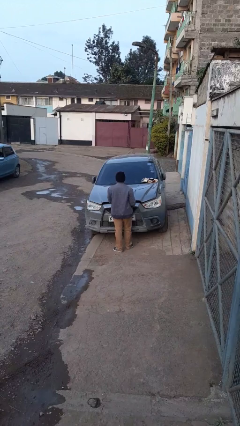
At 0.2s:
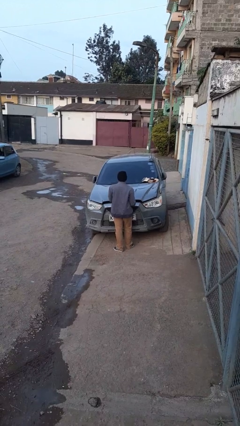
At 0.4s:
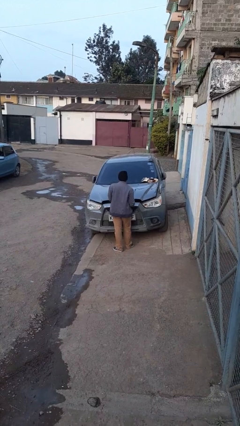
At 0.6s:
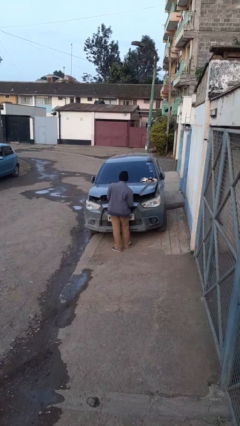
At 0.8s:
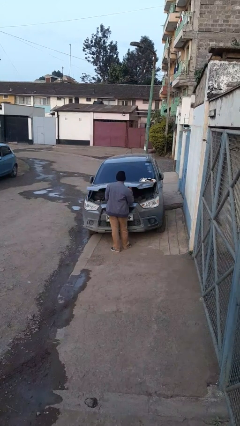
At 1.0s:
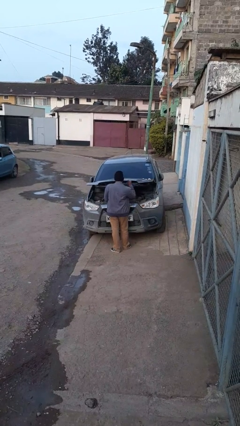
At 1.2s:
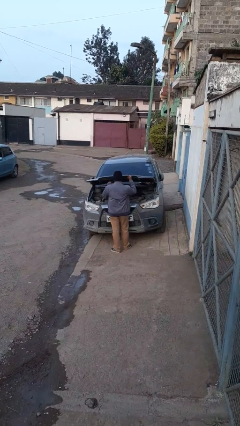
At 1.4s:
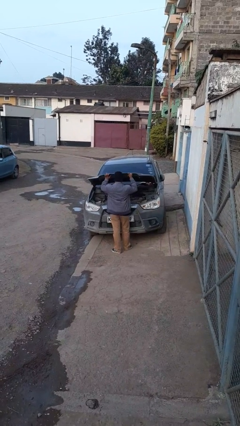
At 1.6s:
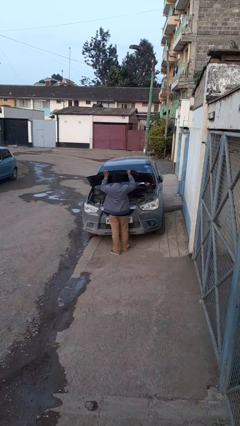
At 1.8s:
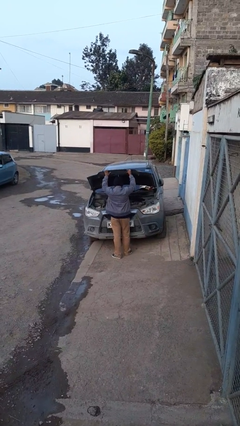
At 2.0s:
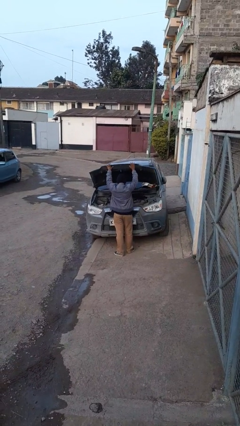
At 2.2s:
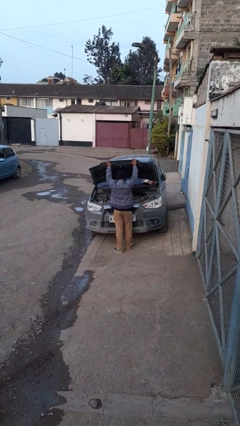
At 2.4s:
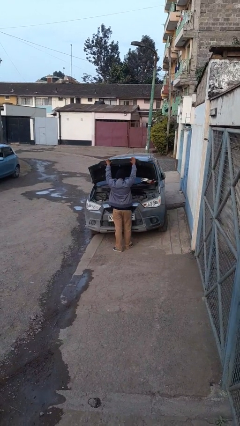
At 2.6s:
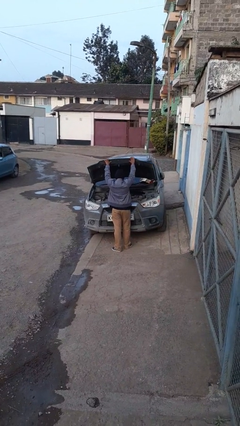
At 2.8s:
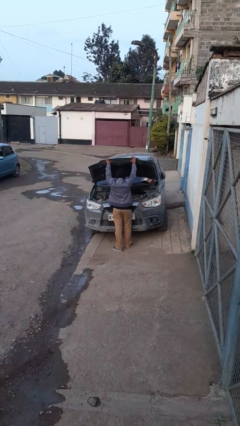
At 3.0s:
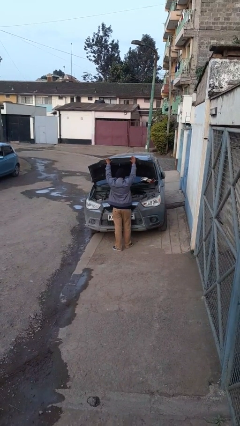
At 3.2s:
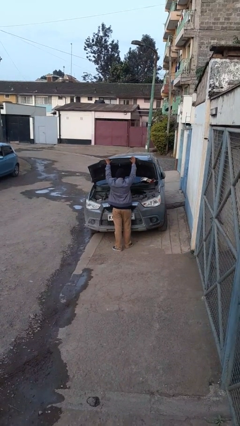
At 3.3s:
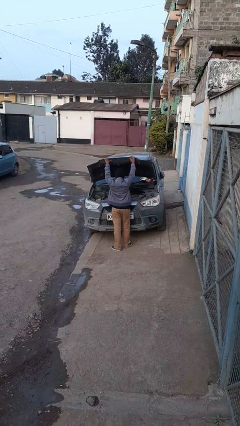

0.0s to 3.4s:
person opens car hood

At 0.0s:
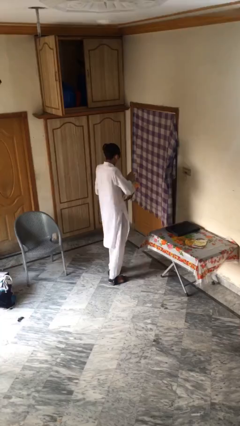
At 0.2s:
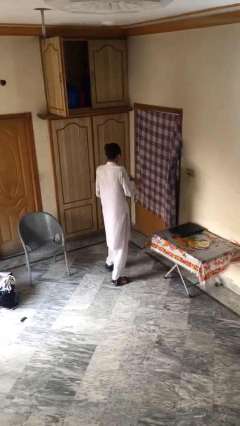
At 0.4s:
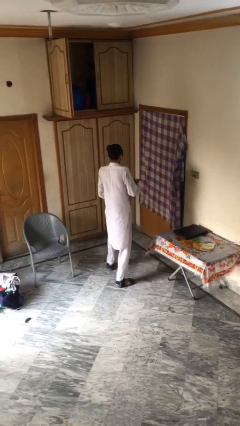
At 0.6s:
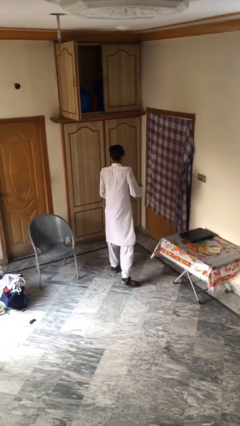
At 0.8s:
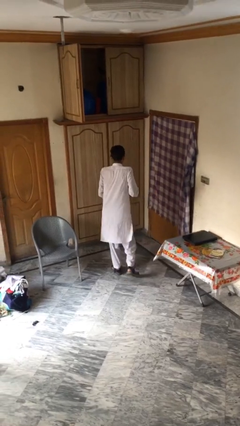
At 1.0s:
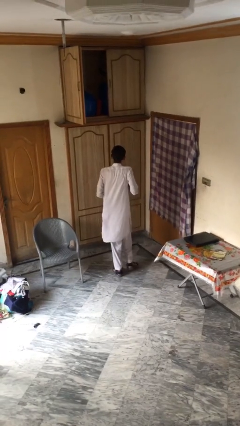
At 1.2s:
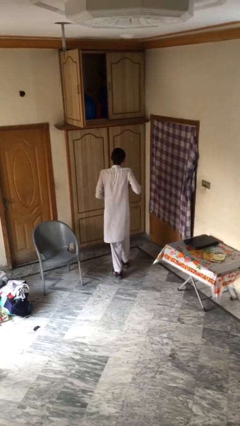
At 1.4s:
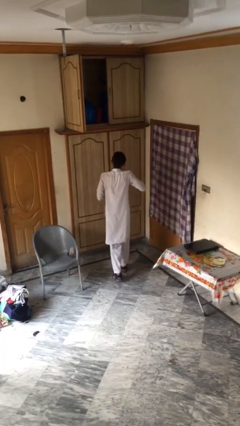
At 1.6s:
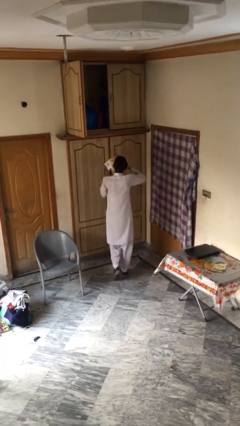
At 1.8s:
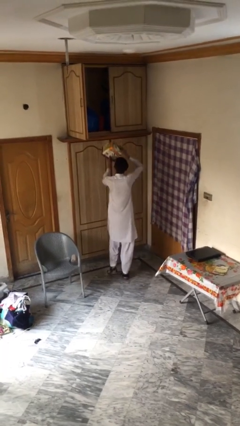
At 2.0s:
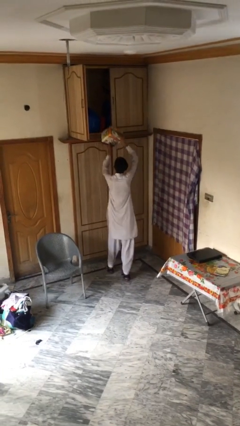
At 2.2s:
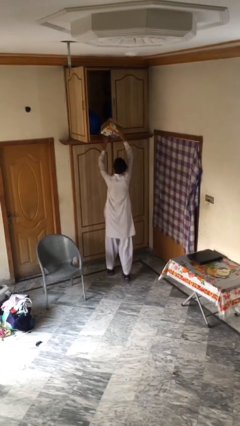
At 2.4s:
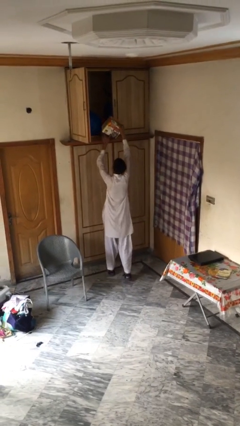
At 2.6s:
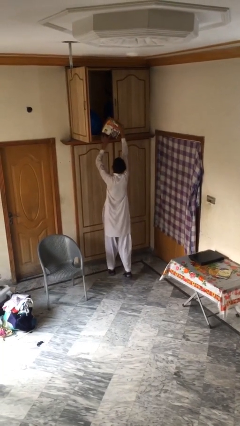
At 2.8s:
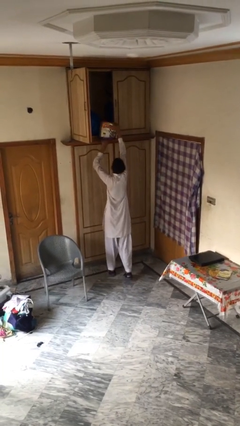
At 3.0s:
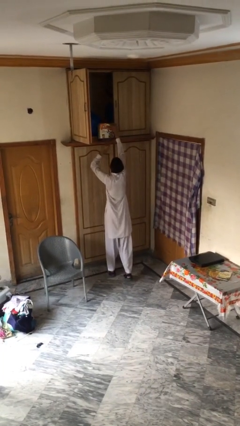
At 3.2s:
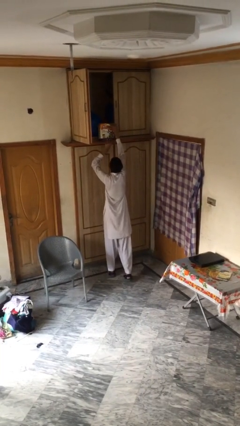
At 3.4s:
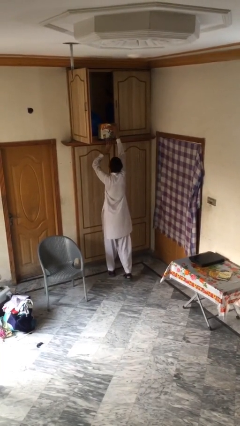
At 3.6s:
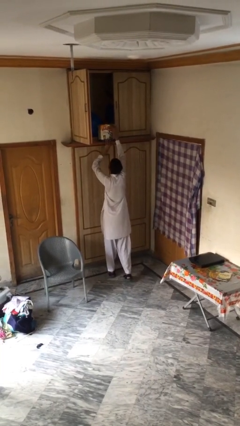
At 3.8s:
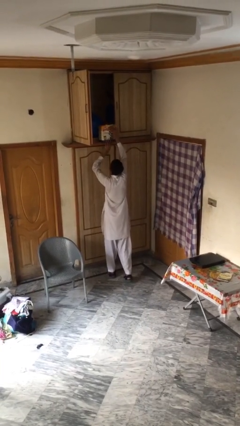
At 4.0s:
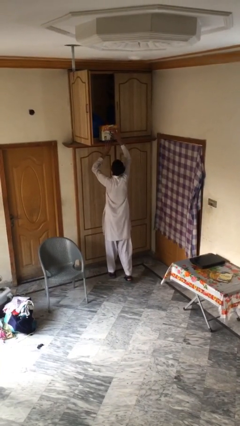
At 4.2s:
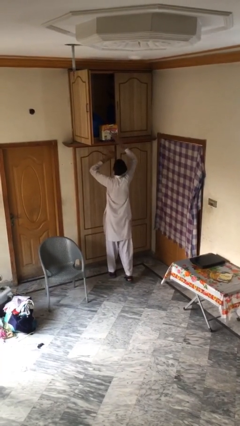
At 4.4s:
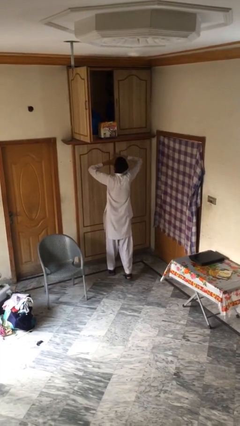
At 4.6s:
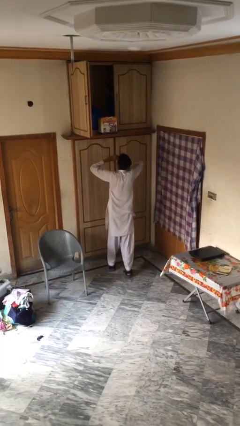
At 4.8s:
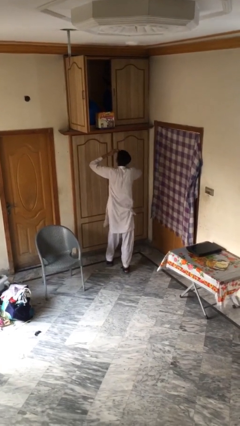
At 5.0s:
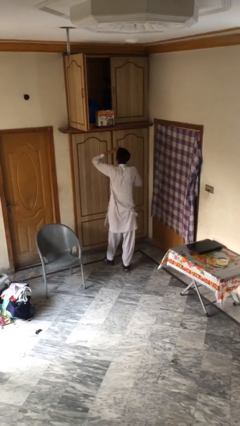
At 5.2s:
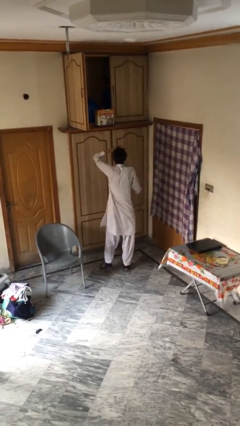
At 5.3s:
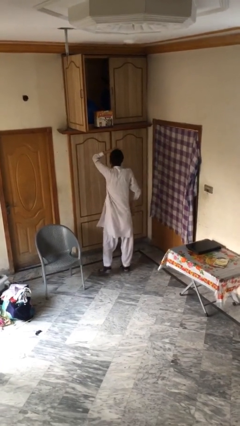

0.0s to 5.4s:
person puts down object on shelf

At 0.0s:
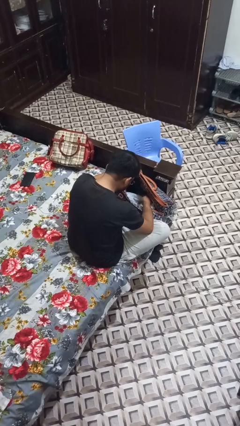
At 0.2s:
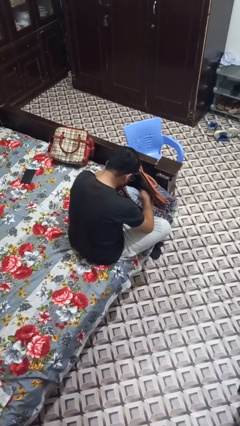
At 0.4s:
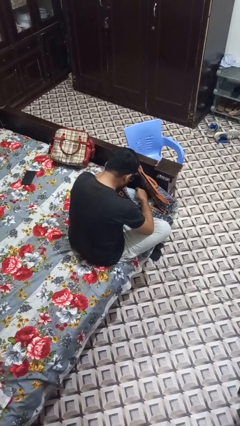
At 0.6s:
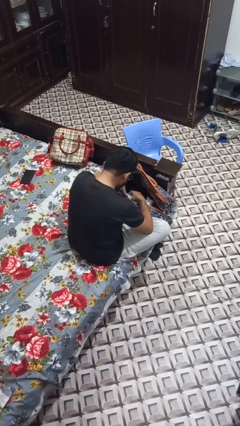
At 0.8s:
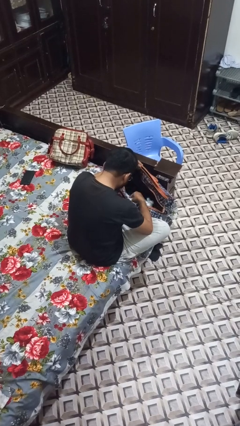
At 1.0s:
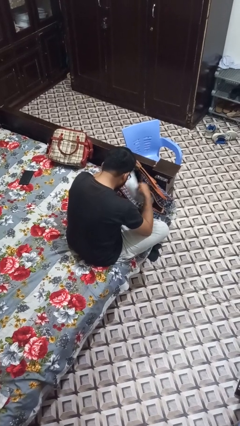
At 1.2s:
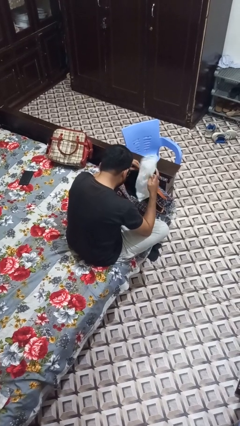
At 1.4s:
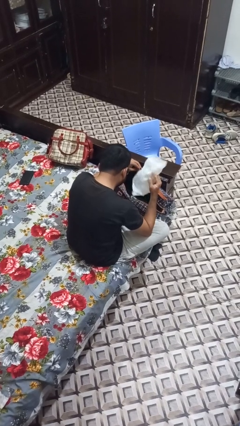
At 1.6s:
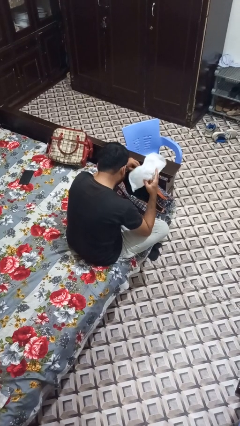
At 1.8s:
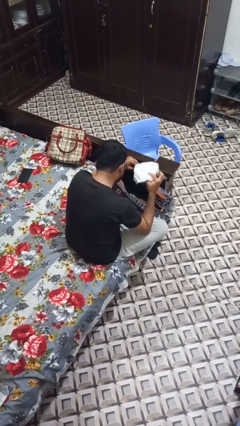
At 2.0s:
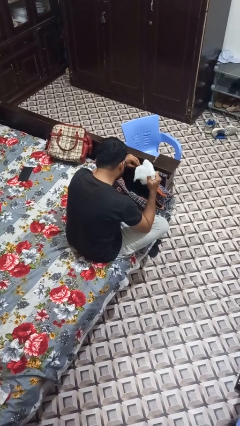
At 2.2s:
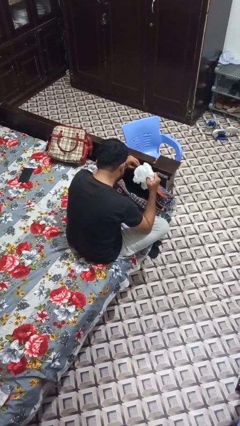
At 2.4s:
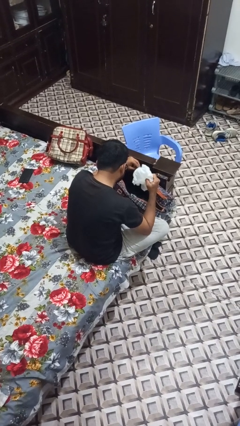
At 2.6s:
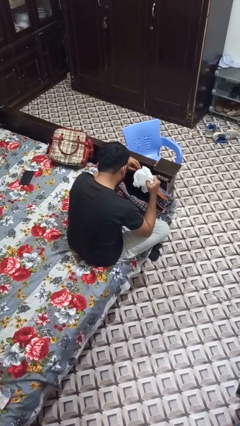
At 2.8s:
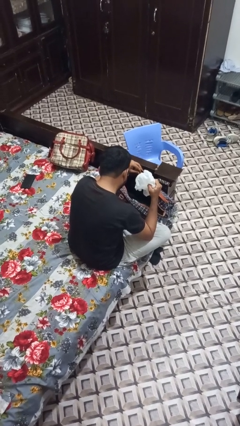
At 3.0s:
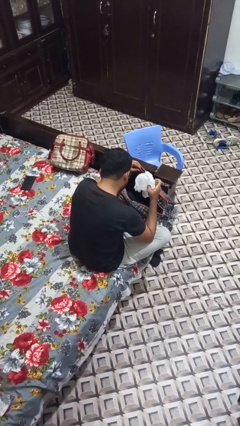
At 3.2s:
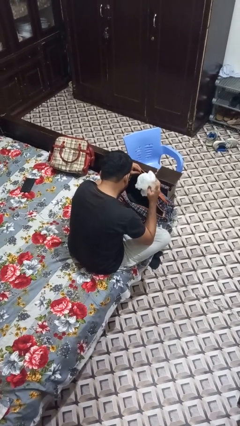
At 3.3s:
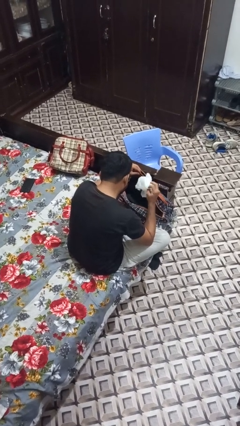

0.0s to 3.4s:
person takes object from backpack

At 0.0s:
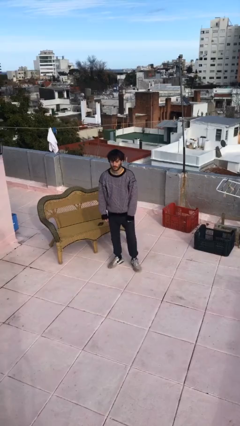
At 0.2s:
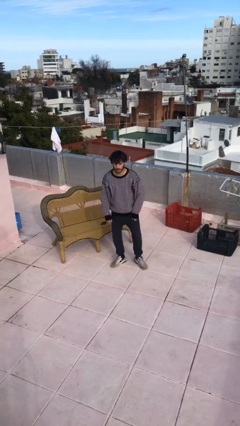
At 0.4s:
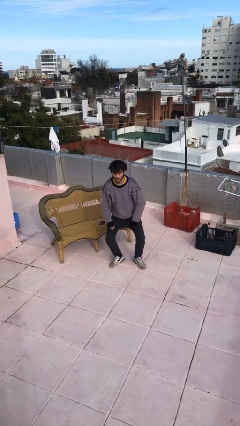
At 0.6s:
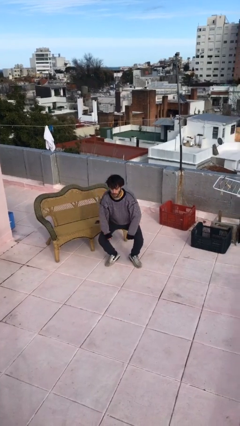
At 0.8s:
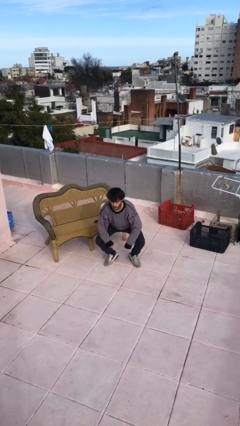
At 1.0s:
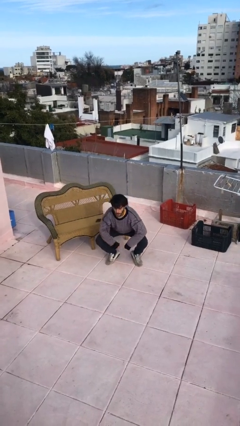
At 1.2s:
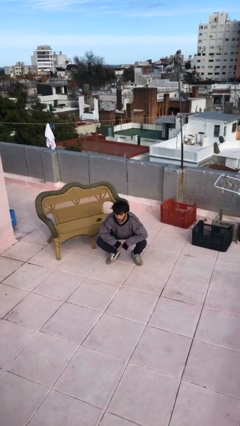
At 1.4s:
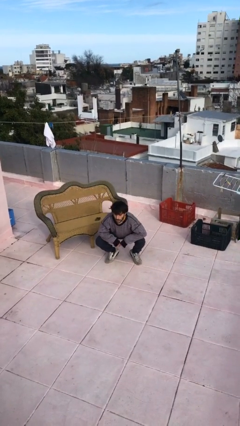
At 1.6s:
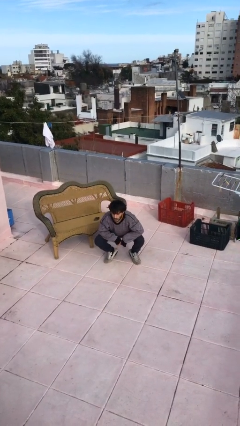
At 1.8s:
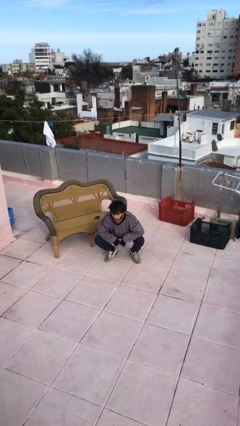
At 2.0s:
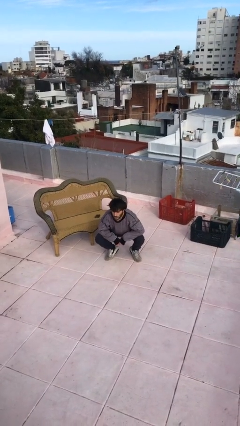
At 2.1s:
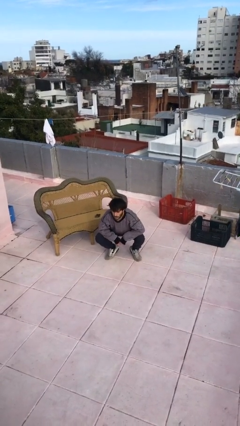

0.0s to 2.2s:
person squats

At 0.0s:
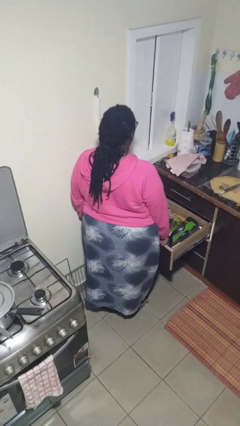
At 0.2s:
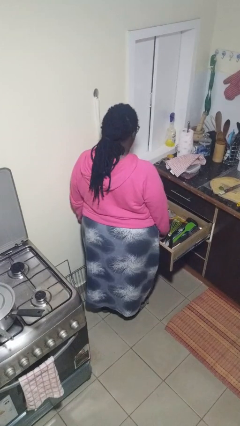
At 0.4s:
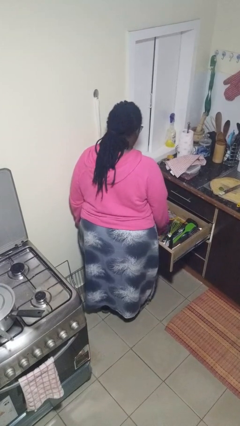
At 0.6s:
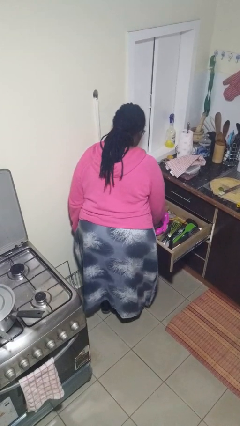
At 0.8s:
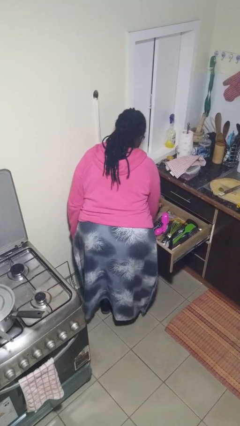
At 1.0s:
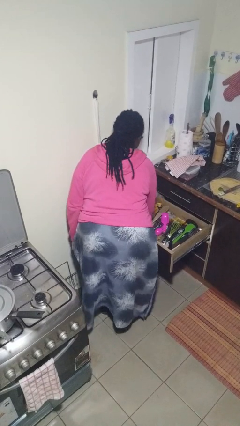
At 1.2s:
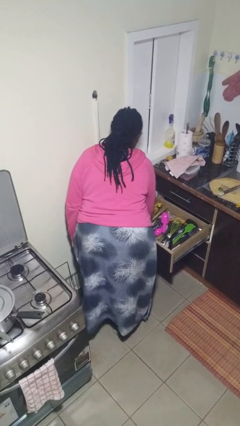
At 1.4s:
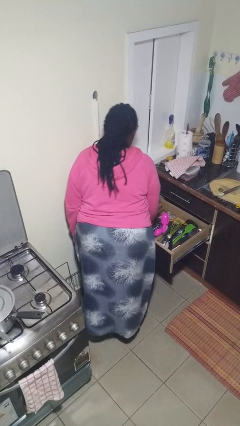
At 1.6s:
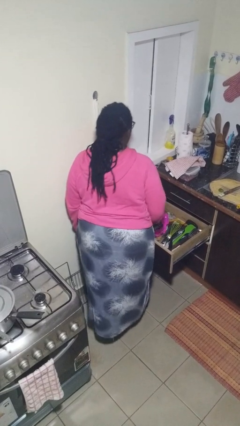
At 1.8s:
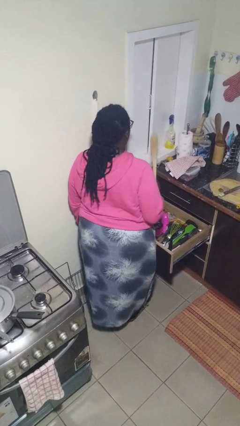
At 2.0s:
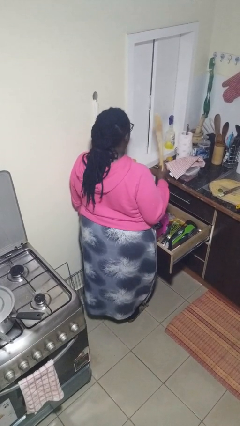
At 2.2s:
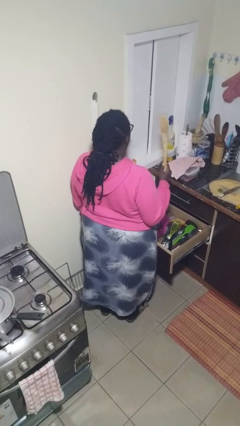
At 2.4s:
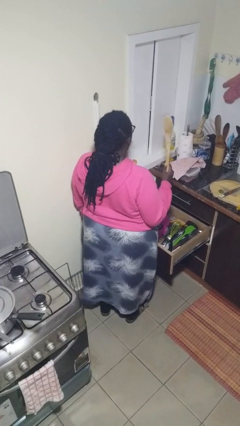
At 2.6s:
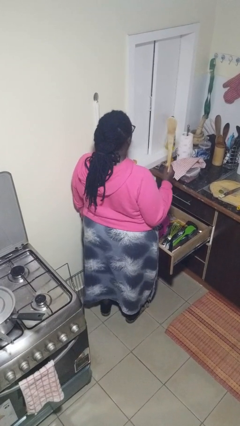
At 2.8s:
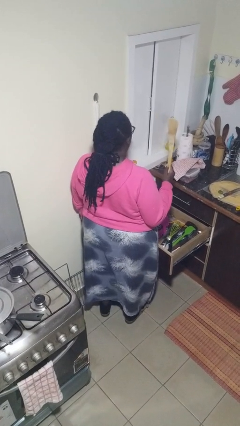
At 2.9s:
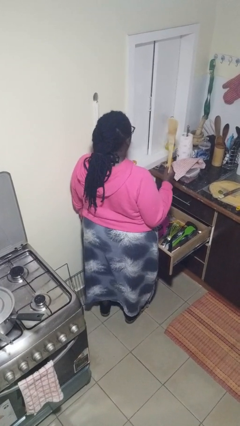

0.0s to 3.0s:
person takes object from kitchen drawer

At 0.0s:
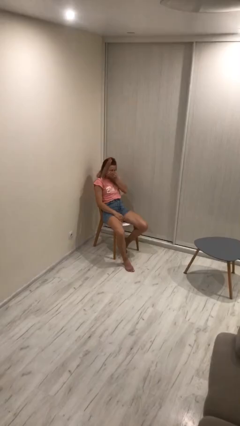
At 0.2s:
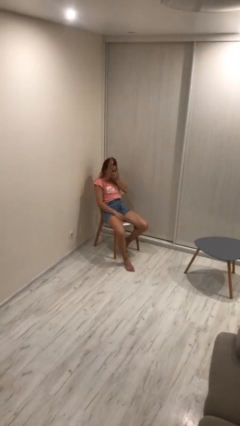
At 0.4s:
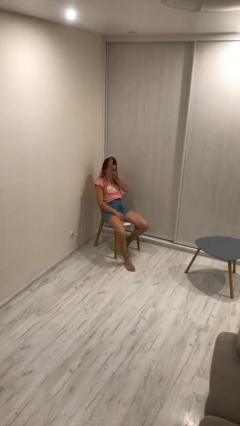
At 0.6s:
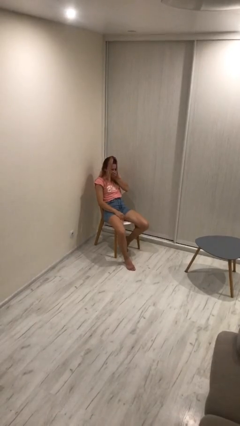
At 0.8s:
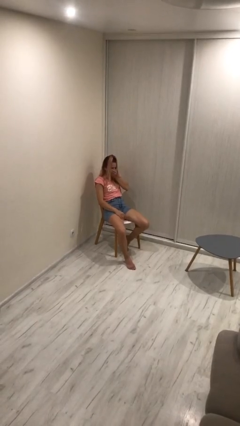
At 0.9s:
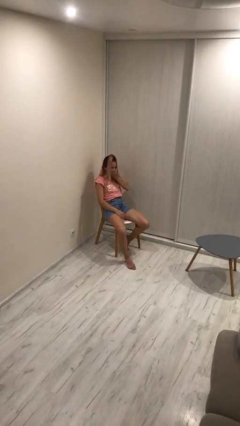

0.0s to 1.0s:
person sneezes into hand
